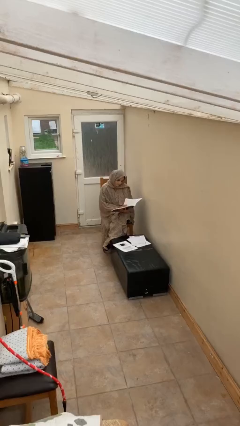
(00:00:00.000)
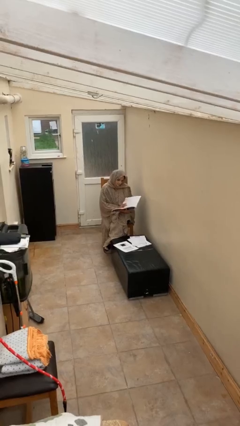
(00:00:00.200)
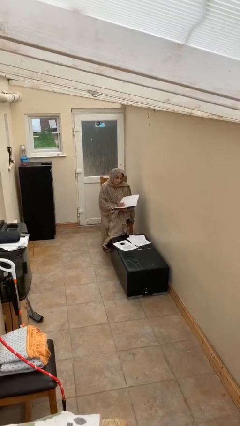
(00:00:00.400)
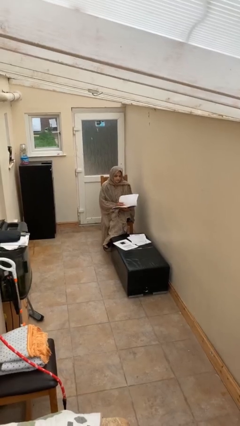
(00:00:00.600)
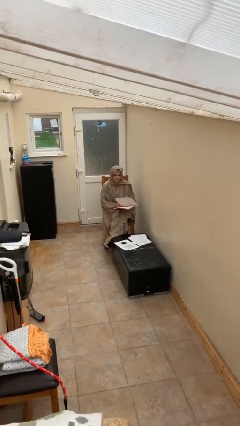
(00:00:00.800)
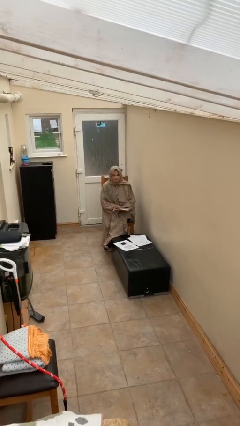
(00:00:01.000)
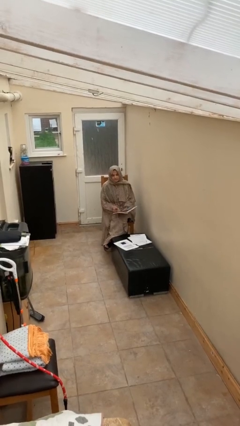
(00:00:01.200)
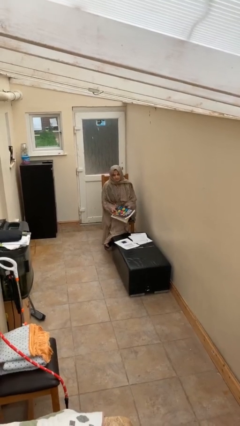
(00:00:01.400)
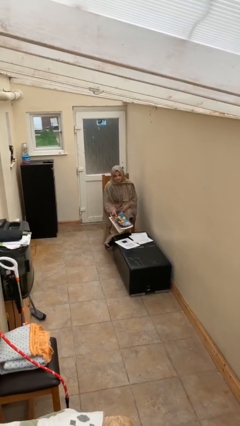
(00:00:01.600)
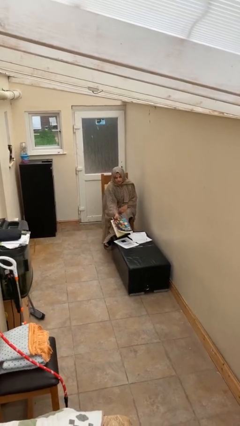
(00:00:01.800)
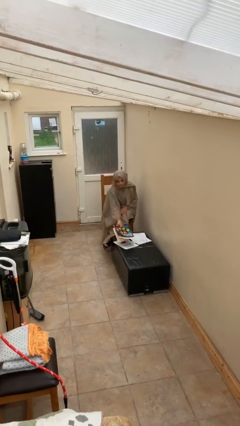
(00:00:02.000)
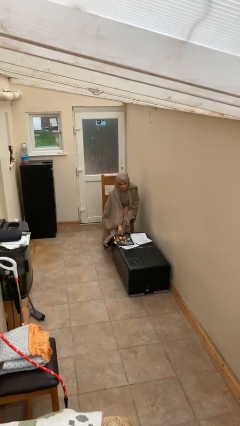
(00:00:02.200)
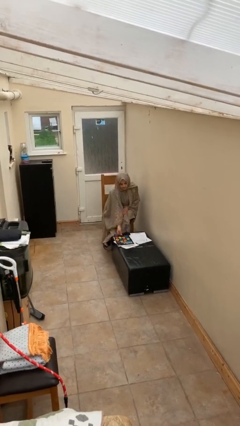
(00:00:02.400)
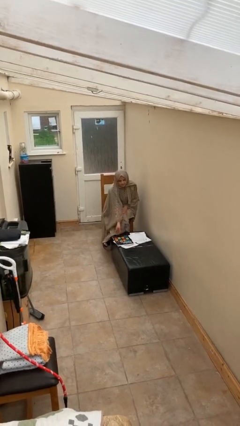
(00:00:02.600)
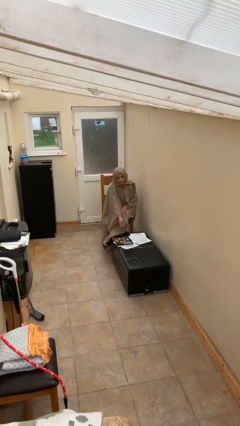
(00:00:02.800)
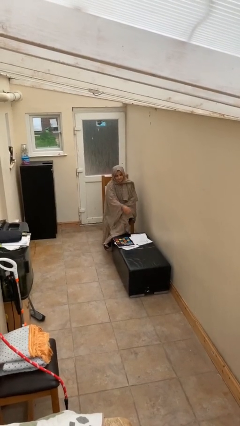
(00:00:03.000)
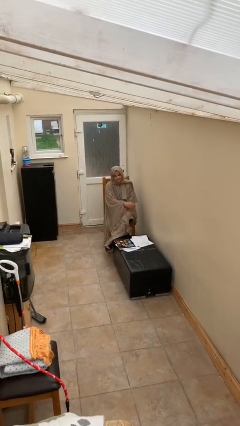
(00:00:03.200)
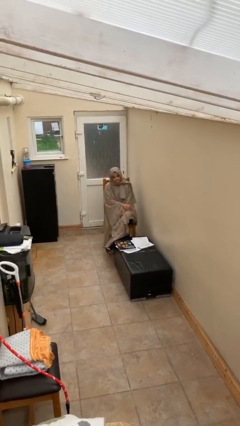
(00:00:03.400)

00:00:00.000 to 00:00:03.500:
person puts down object on table

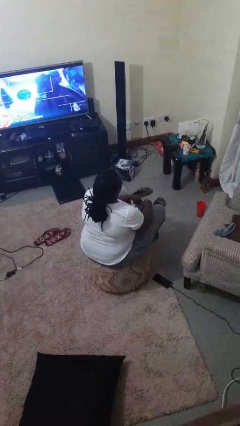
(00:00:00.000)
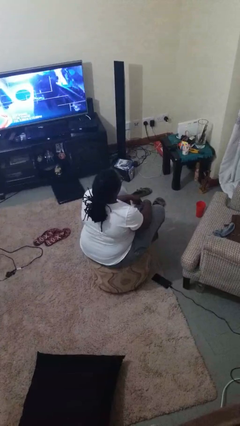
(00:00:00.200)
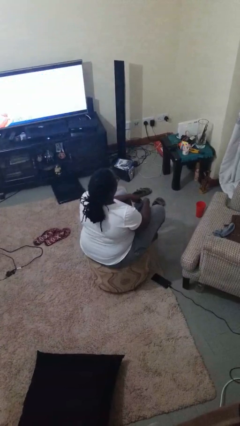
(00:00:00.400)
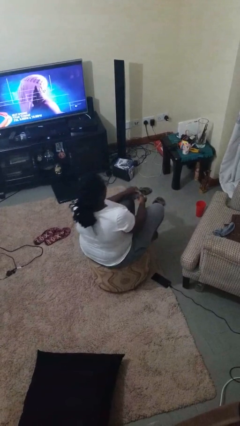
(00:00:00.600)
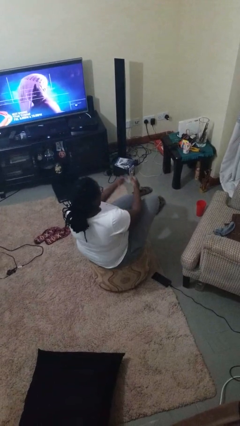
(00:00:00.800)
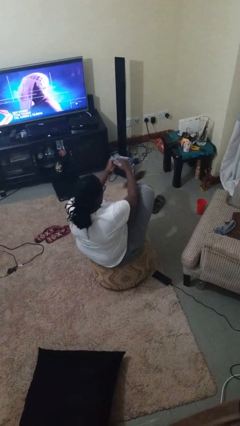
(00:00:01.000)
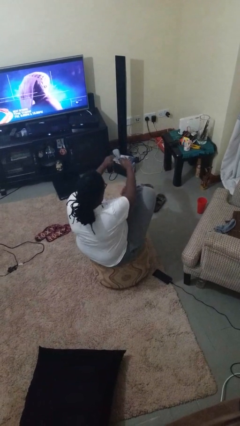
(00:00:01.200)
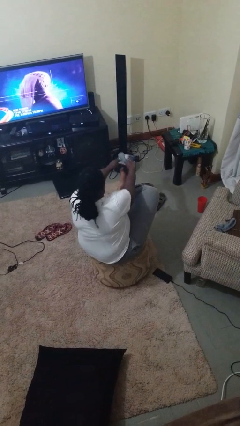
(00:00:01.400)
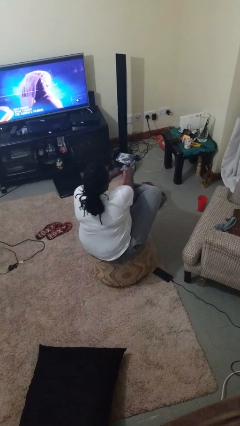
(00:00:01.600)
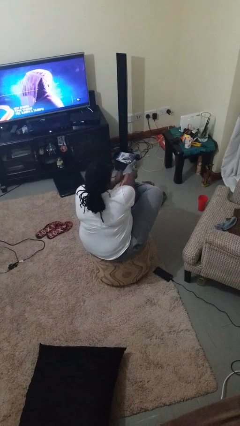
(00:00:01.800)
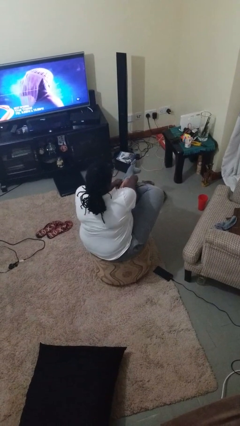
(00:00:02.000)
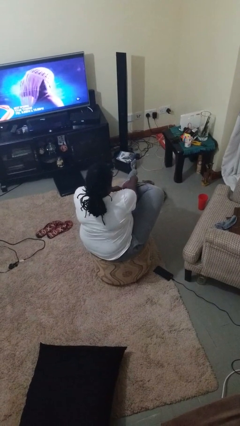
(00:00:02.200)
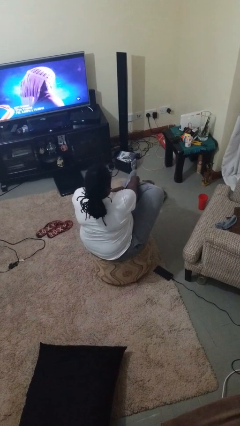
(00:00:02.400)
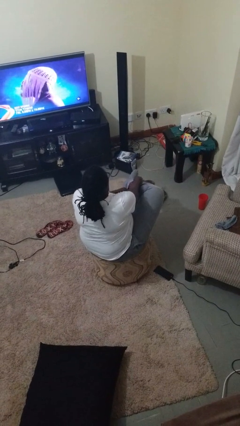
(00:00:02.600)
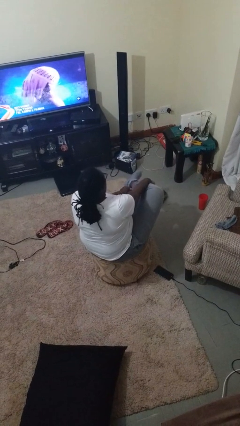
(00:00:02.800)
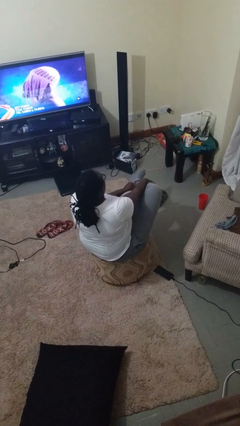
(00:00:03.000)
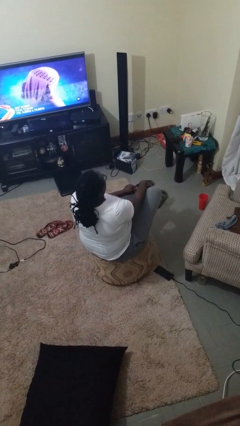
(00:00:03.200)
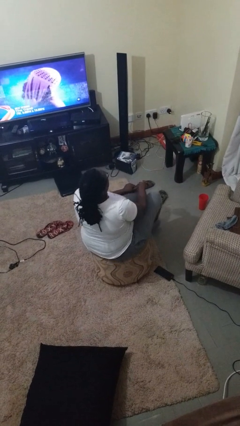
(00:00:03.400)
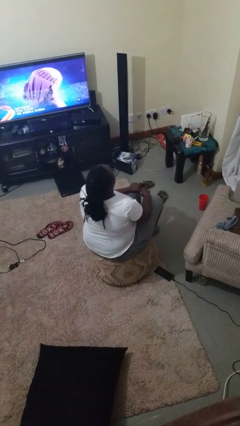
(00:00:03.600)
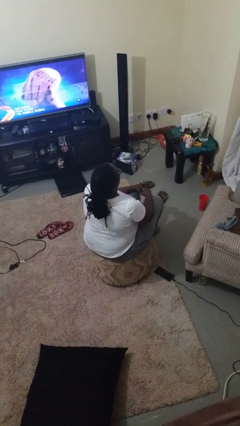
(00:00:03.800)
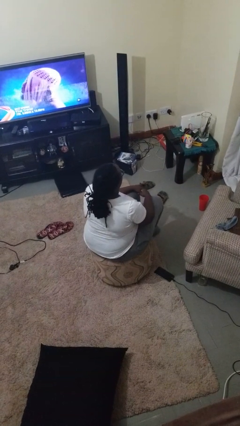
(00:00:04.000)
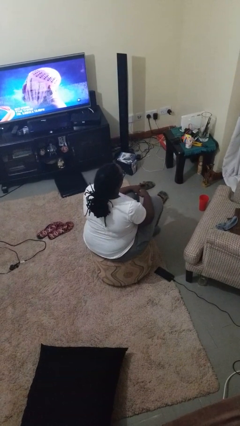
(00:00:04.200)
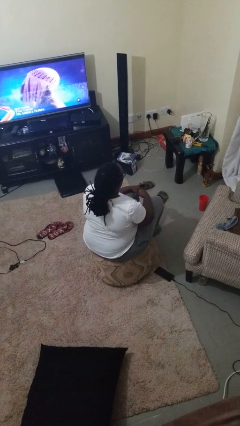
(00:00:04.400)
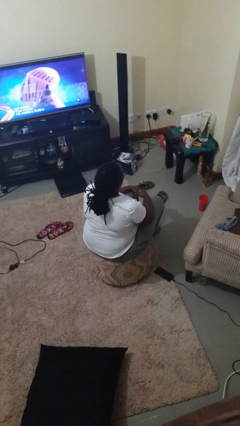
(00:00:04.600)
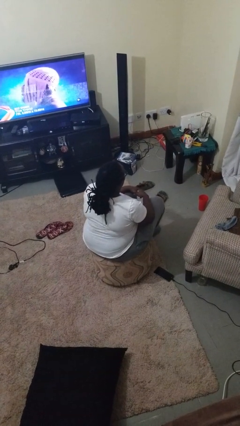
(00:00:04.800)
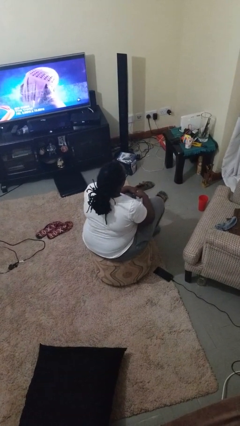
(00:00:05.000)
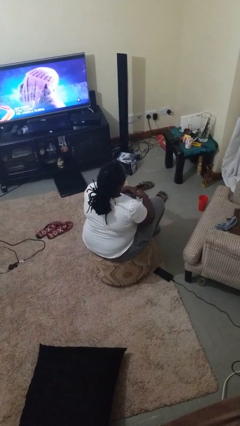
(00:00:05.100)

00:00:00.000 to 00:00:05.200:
person puts on socks

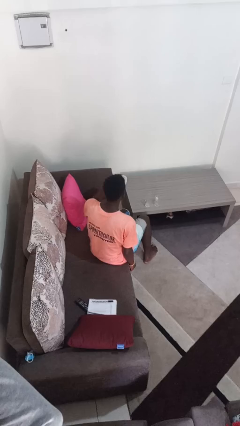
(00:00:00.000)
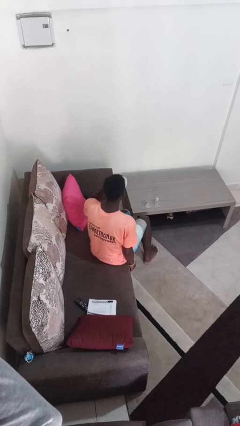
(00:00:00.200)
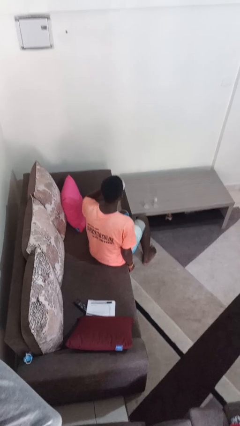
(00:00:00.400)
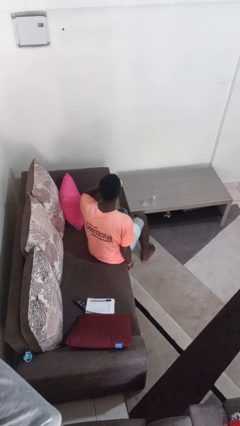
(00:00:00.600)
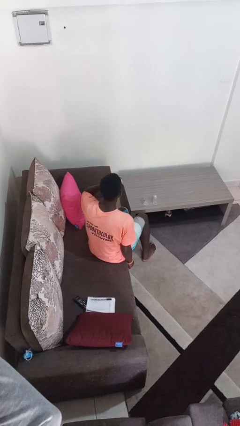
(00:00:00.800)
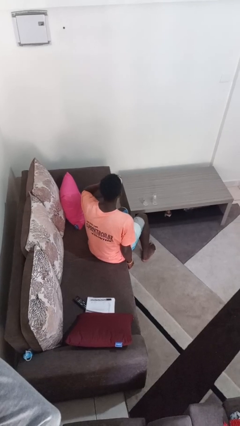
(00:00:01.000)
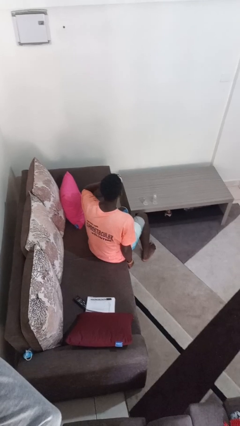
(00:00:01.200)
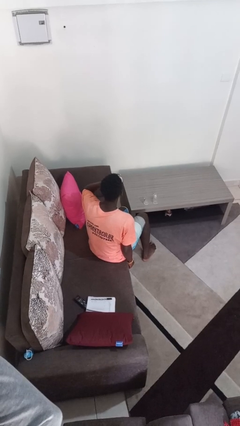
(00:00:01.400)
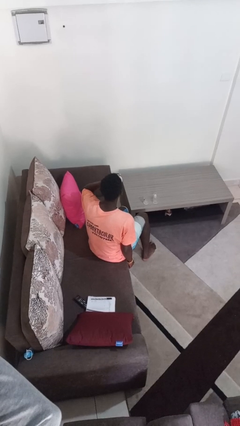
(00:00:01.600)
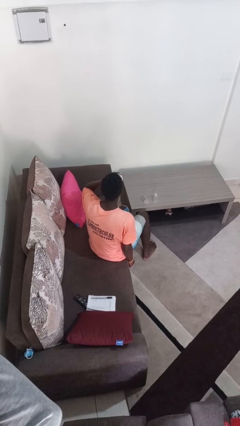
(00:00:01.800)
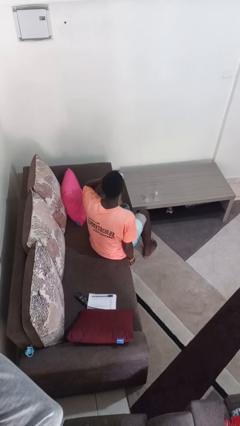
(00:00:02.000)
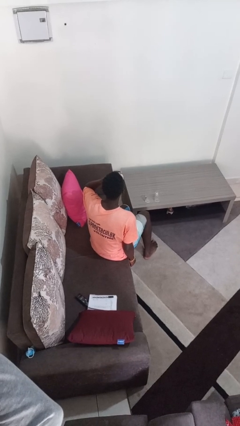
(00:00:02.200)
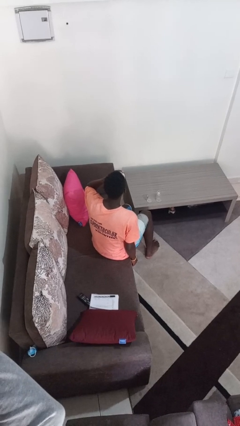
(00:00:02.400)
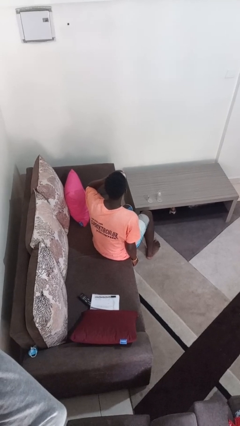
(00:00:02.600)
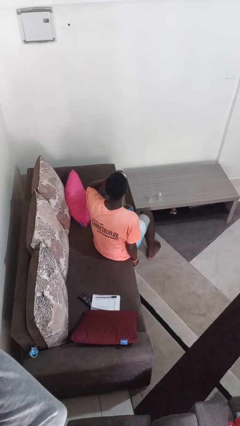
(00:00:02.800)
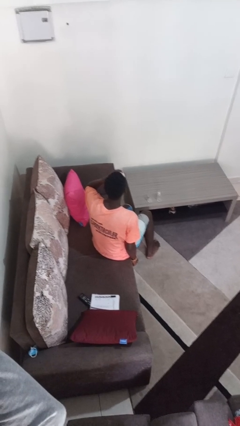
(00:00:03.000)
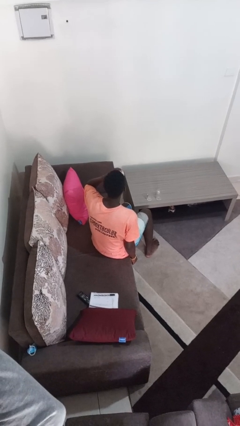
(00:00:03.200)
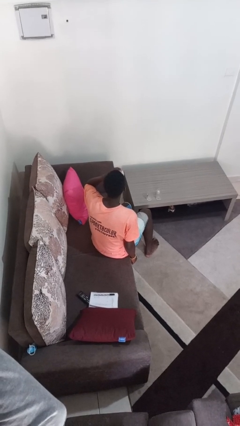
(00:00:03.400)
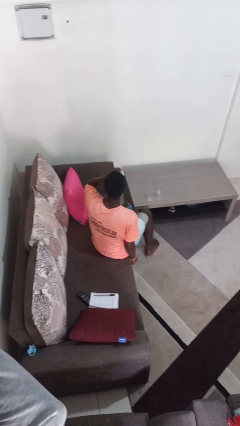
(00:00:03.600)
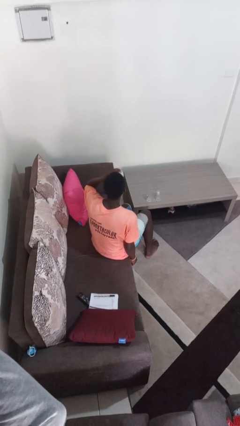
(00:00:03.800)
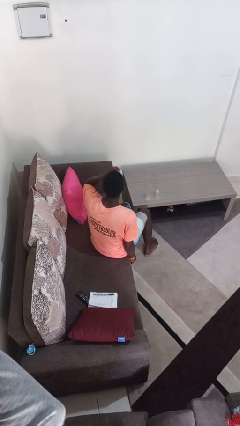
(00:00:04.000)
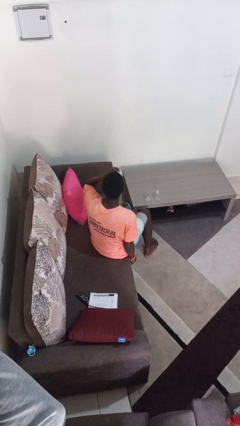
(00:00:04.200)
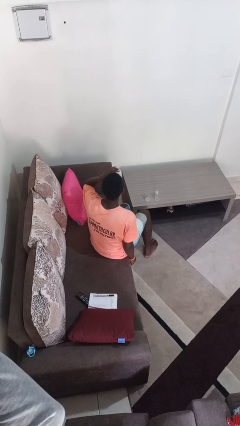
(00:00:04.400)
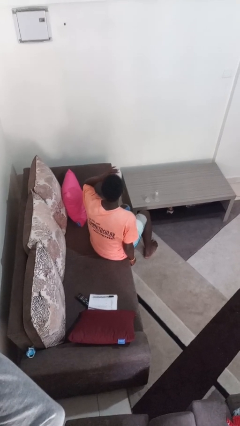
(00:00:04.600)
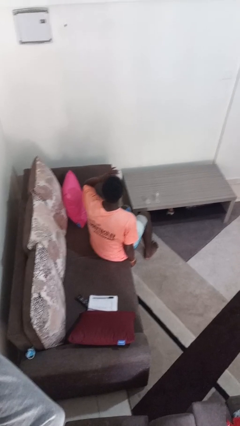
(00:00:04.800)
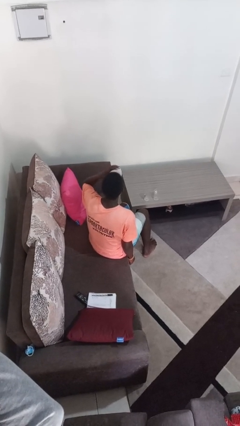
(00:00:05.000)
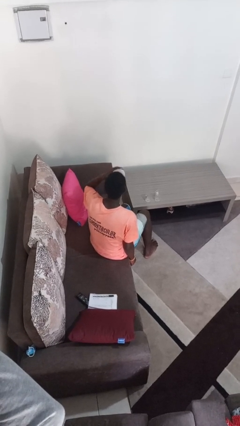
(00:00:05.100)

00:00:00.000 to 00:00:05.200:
person drinks from shotglass

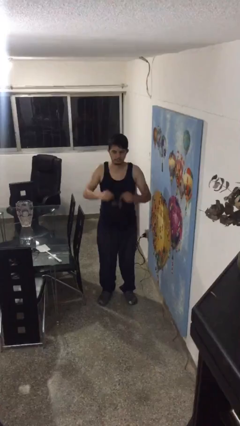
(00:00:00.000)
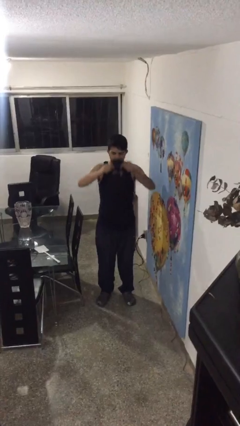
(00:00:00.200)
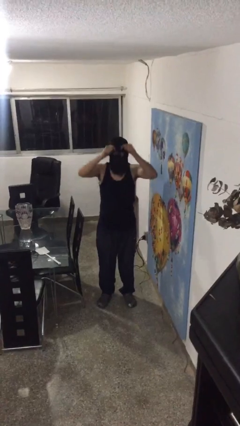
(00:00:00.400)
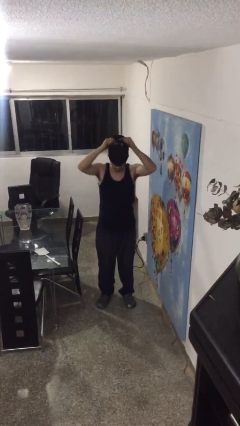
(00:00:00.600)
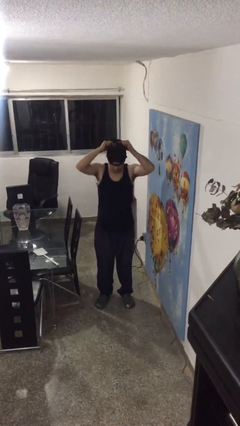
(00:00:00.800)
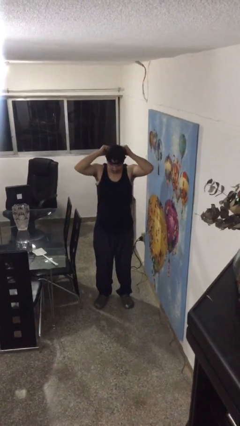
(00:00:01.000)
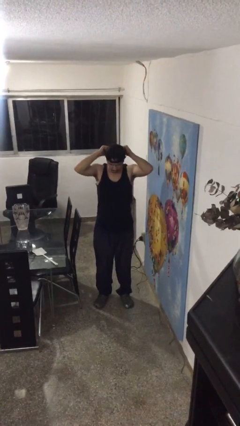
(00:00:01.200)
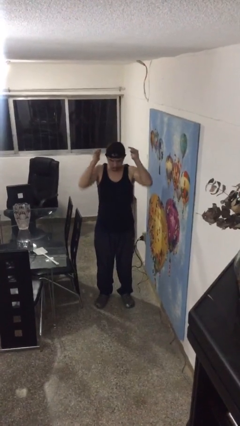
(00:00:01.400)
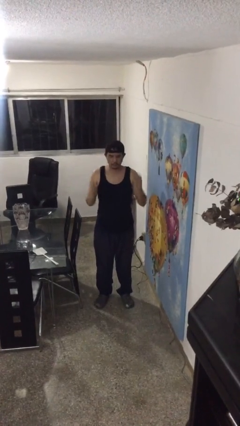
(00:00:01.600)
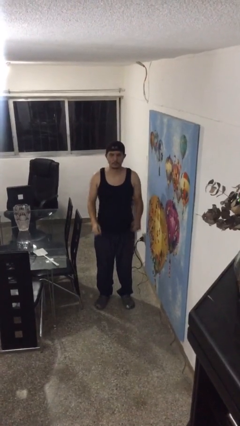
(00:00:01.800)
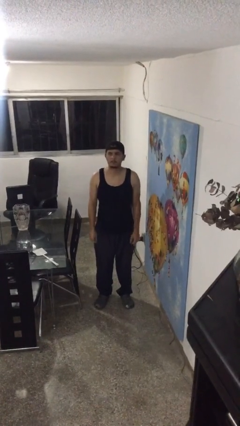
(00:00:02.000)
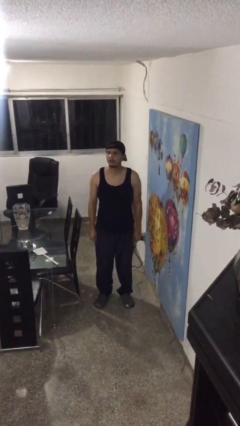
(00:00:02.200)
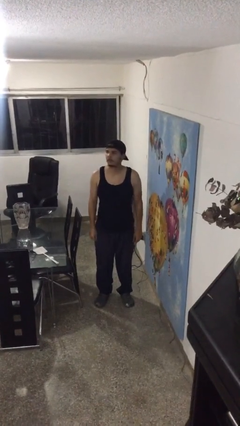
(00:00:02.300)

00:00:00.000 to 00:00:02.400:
person puts on hat

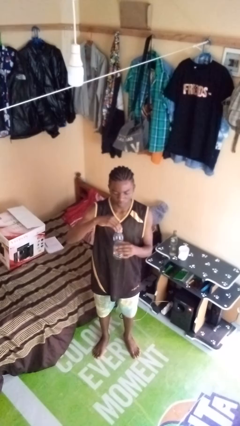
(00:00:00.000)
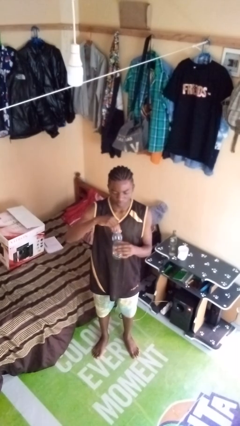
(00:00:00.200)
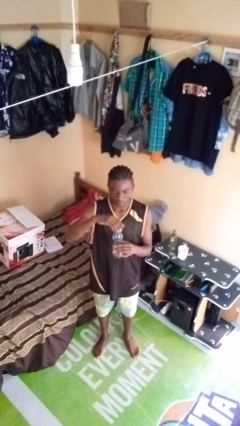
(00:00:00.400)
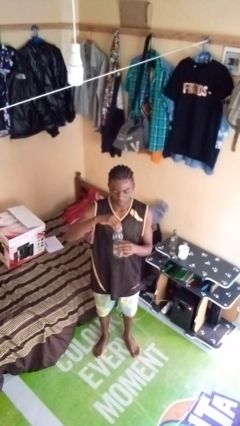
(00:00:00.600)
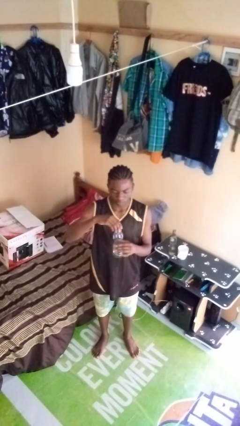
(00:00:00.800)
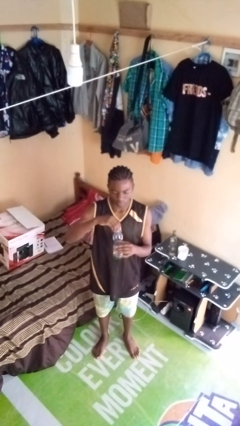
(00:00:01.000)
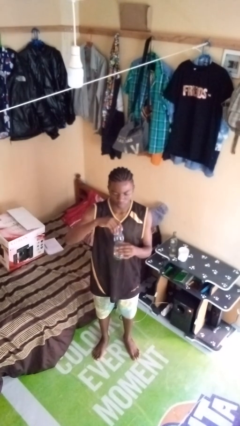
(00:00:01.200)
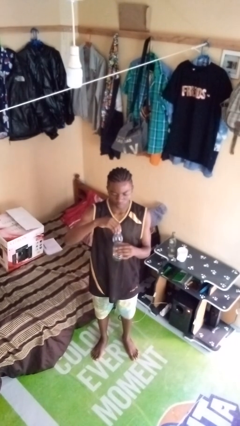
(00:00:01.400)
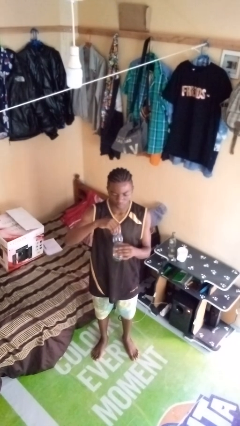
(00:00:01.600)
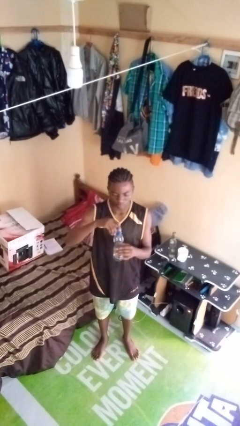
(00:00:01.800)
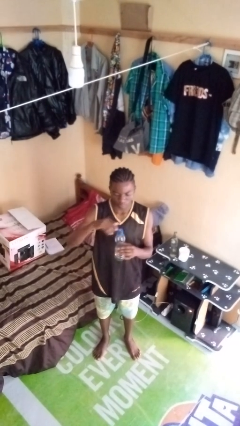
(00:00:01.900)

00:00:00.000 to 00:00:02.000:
person screws lid to bottle
